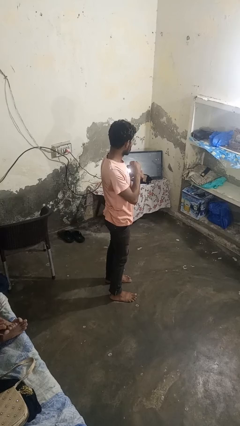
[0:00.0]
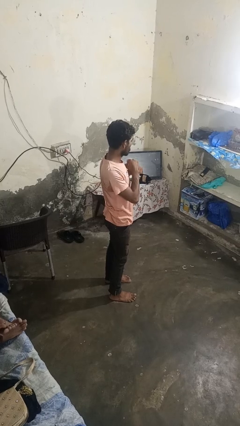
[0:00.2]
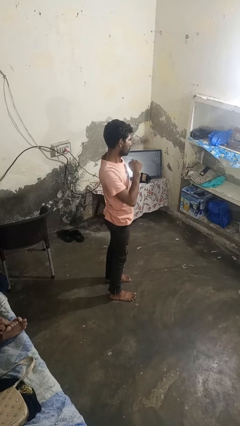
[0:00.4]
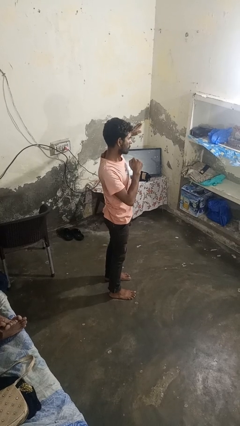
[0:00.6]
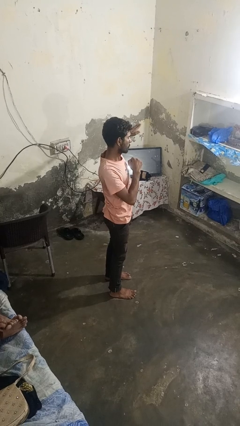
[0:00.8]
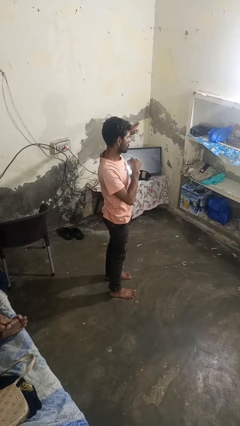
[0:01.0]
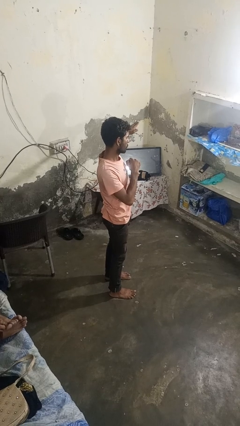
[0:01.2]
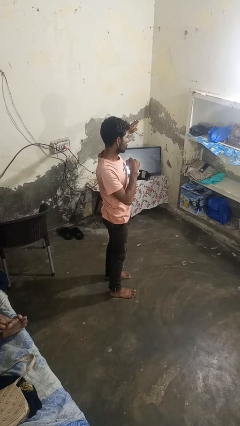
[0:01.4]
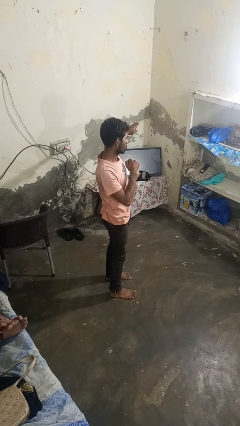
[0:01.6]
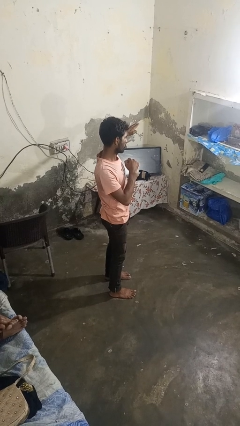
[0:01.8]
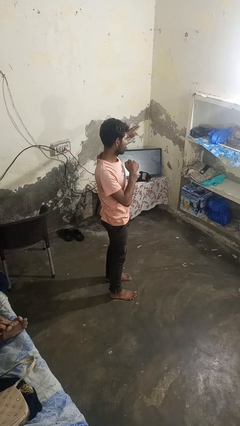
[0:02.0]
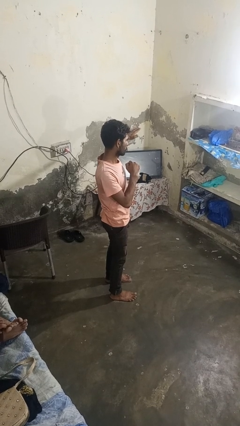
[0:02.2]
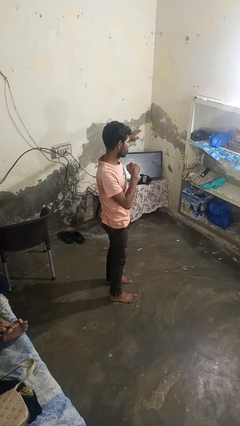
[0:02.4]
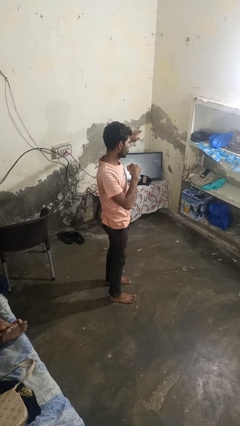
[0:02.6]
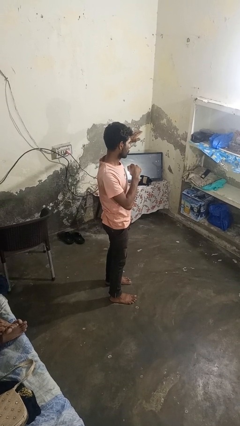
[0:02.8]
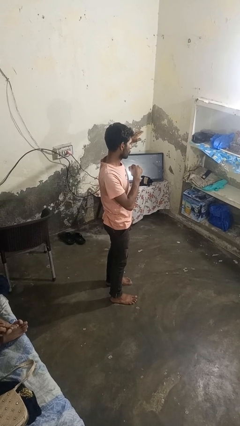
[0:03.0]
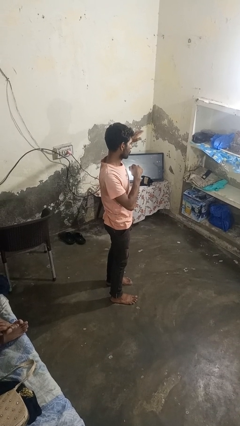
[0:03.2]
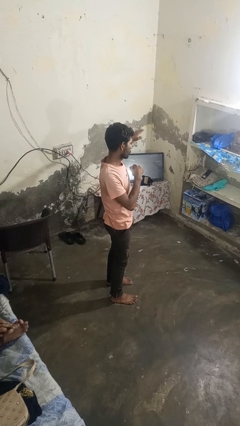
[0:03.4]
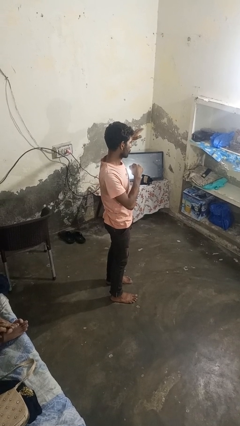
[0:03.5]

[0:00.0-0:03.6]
person karate chop

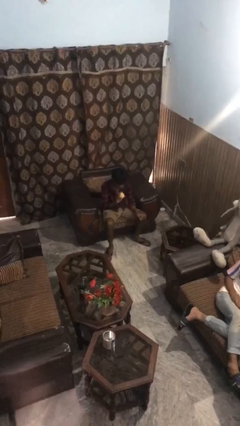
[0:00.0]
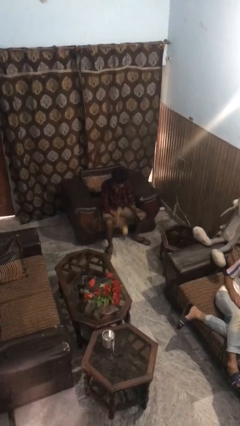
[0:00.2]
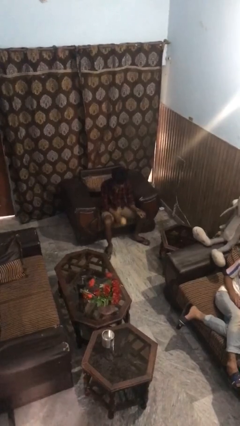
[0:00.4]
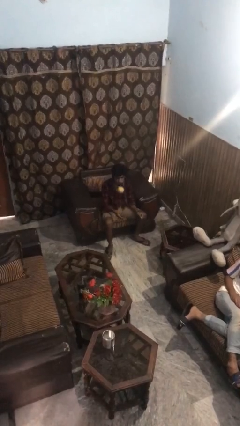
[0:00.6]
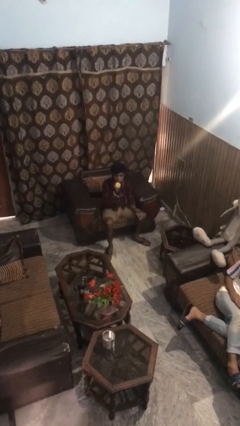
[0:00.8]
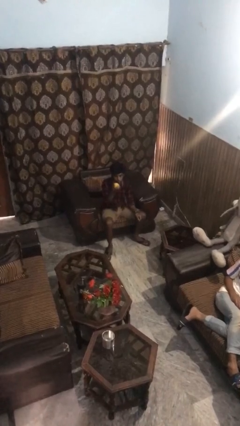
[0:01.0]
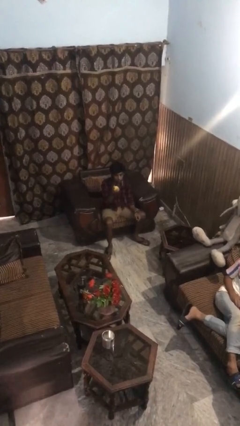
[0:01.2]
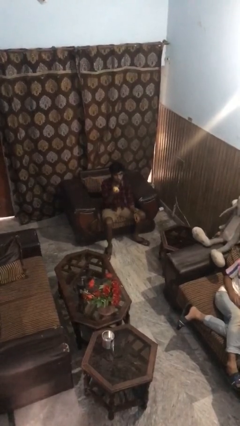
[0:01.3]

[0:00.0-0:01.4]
person bounces ball on floor

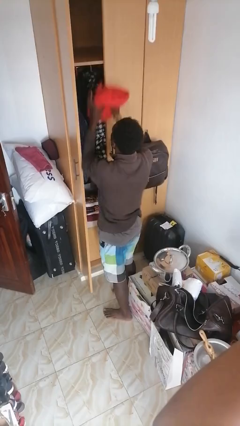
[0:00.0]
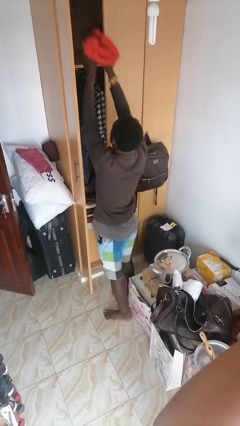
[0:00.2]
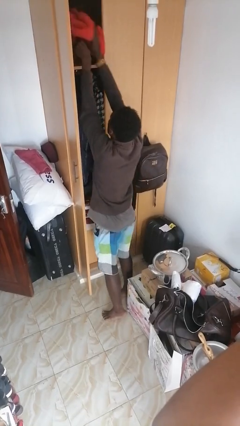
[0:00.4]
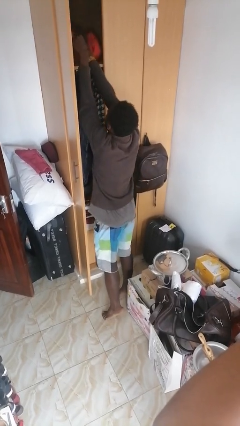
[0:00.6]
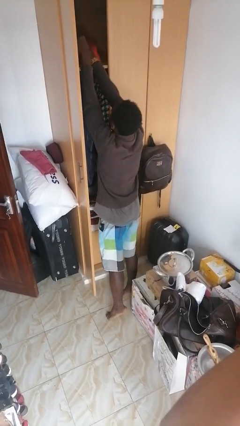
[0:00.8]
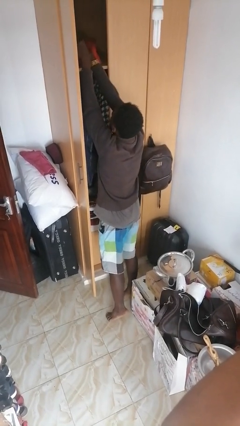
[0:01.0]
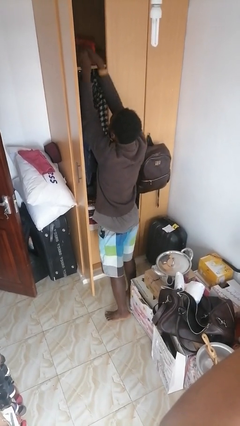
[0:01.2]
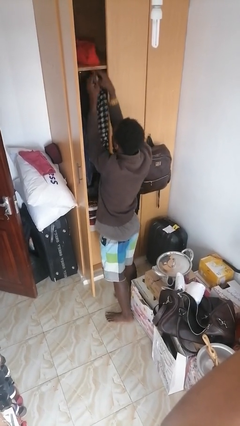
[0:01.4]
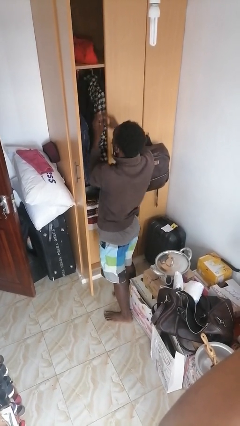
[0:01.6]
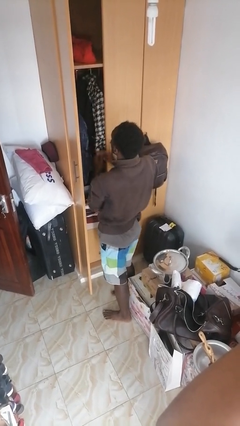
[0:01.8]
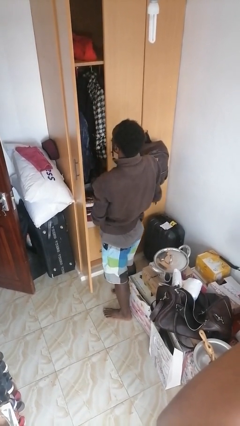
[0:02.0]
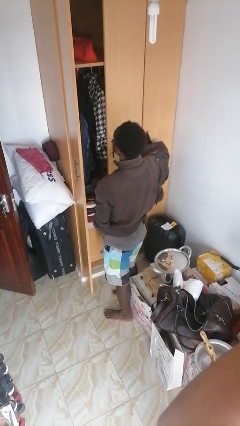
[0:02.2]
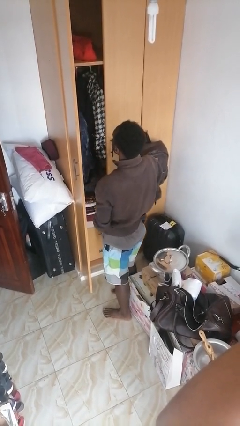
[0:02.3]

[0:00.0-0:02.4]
person puts down object on shelf

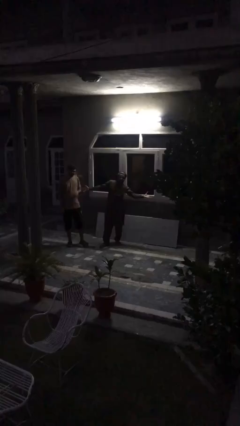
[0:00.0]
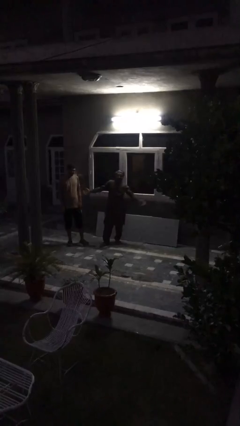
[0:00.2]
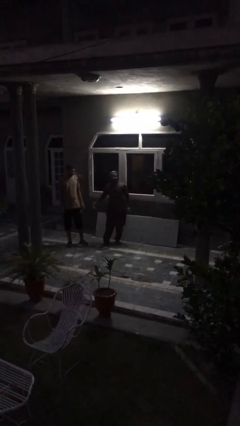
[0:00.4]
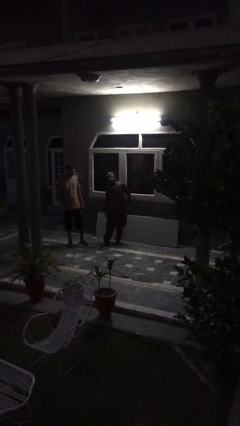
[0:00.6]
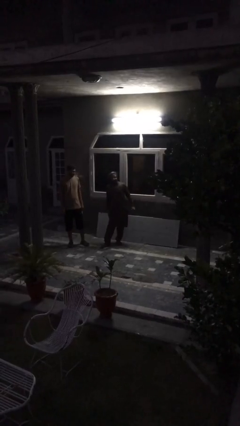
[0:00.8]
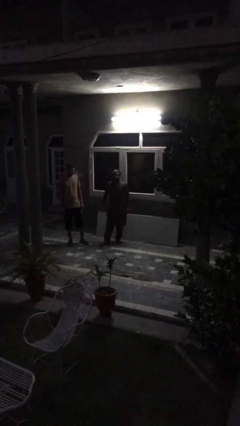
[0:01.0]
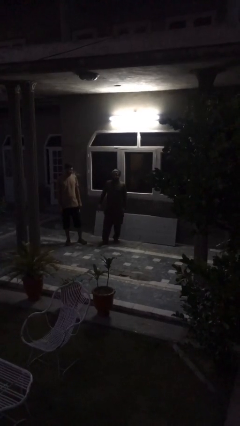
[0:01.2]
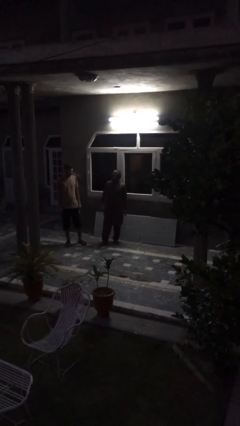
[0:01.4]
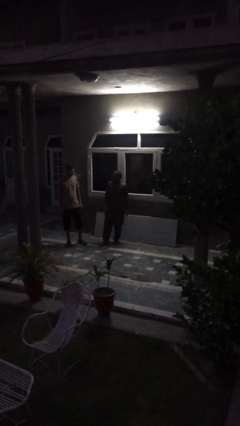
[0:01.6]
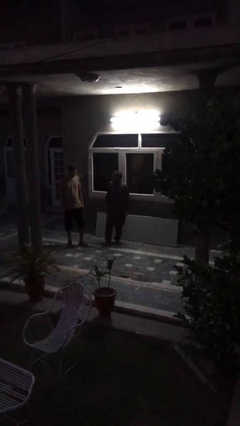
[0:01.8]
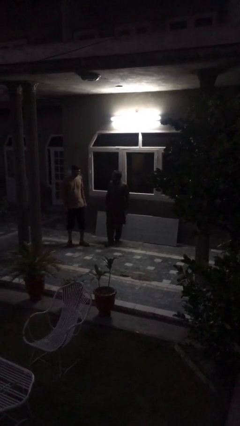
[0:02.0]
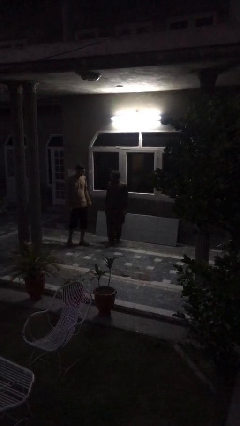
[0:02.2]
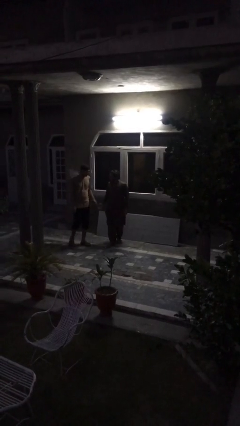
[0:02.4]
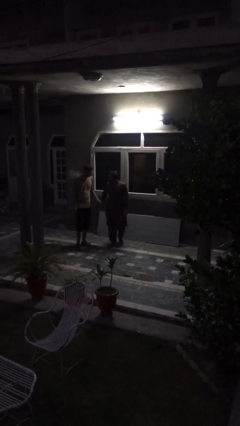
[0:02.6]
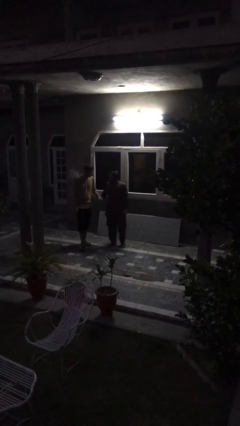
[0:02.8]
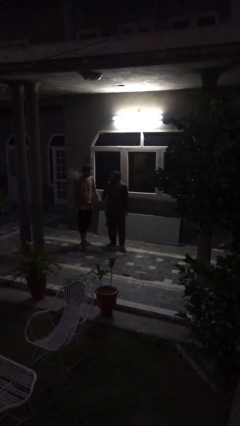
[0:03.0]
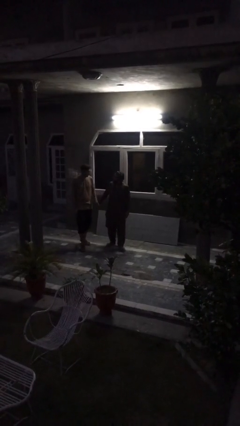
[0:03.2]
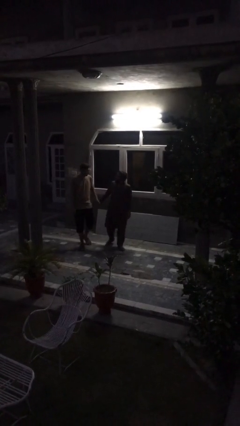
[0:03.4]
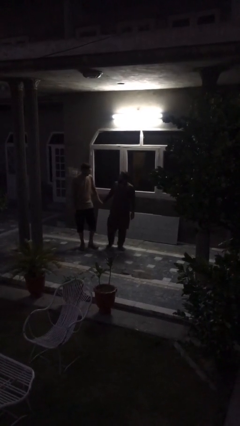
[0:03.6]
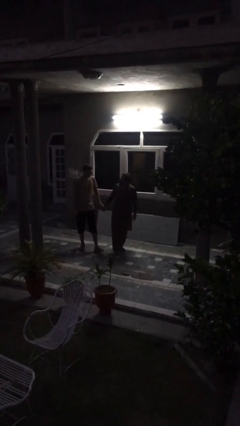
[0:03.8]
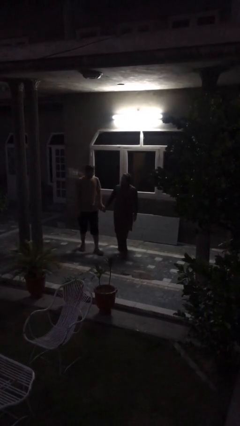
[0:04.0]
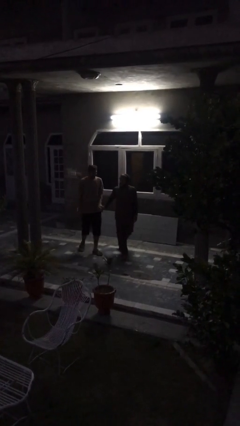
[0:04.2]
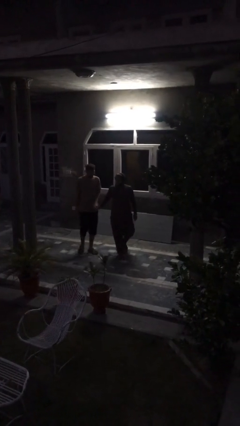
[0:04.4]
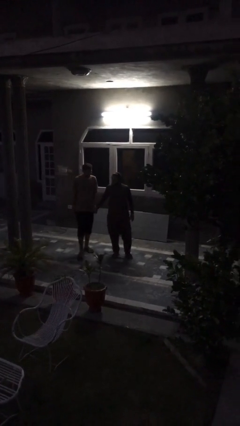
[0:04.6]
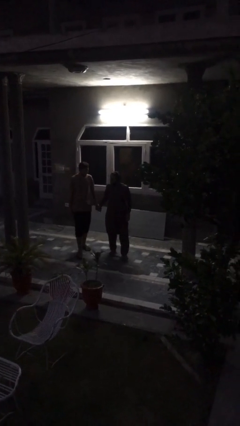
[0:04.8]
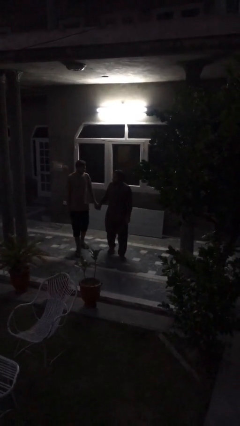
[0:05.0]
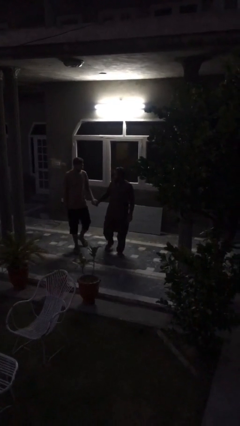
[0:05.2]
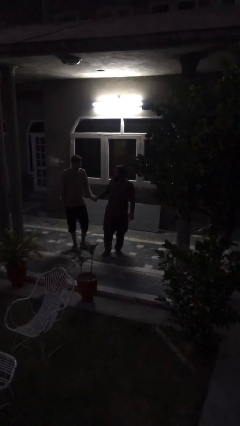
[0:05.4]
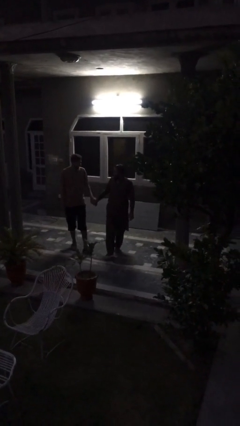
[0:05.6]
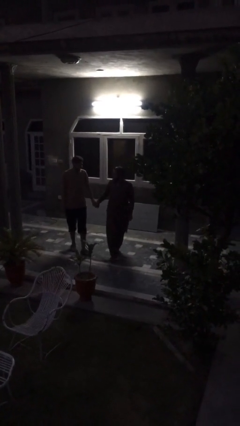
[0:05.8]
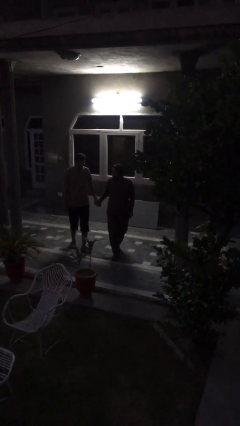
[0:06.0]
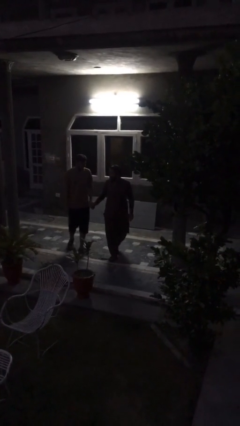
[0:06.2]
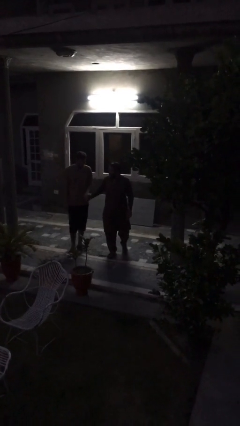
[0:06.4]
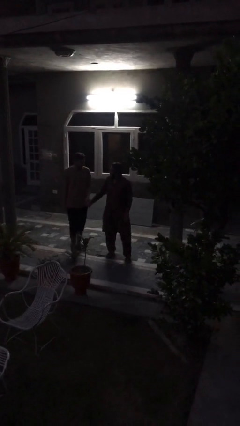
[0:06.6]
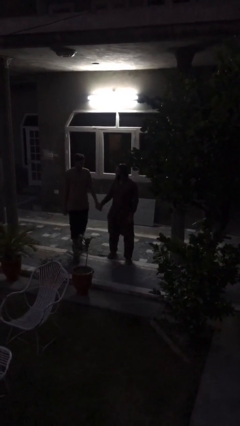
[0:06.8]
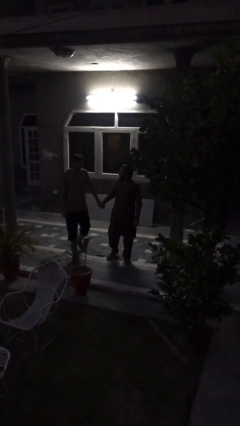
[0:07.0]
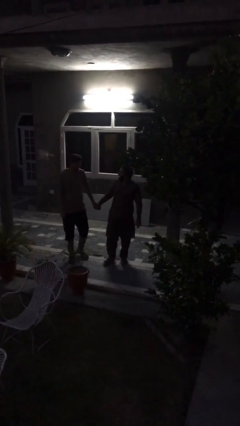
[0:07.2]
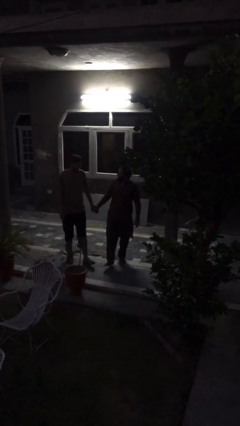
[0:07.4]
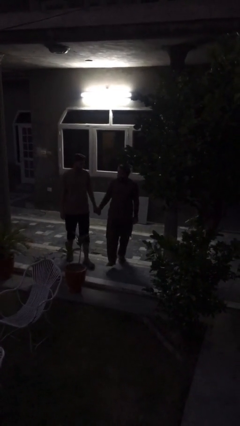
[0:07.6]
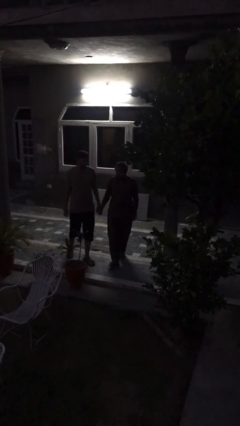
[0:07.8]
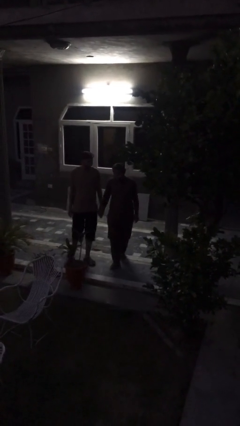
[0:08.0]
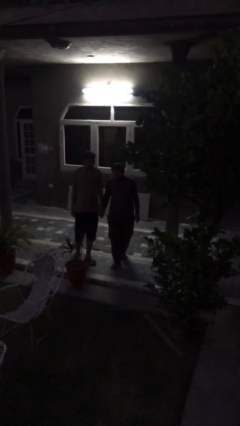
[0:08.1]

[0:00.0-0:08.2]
person holds hand

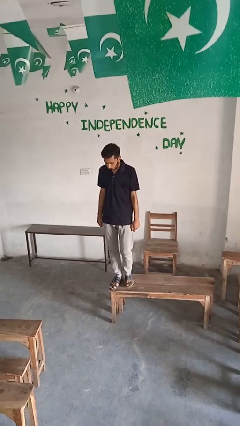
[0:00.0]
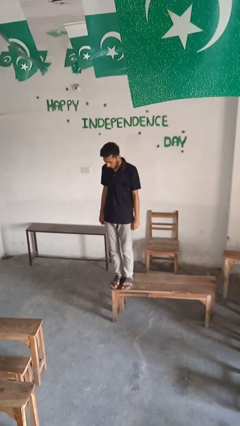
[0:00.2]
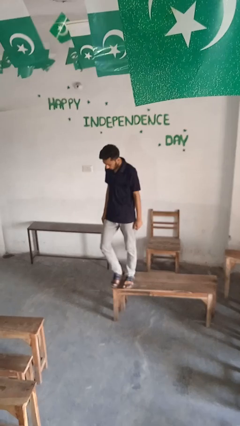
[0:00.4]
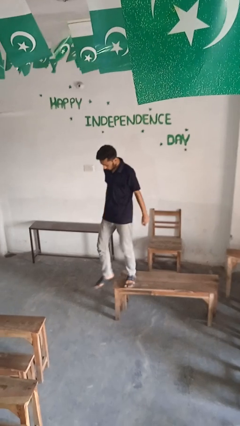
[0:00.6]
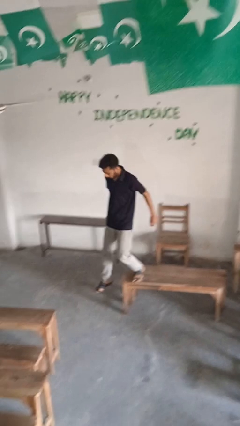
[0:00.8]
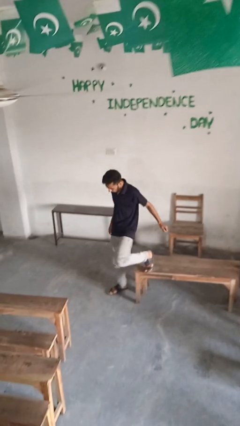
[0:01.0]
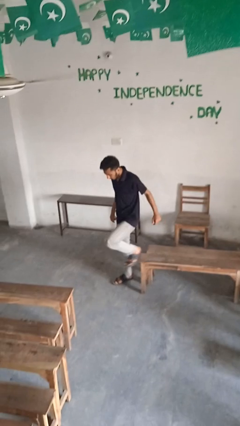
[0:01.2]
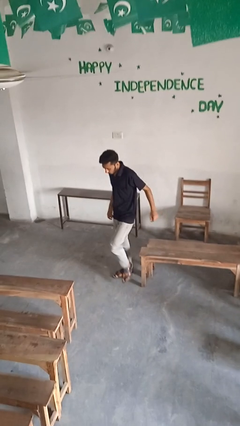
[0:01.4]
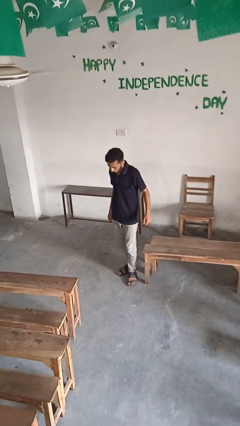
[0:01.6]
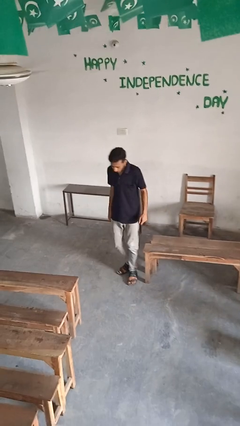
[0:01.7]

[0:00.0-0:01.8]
person climbs off table

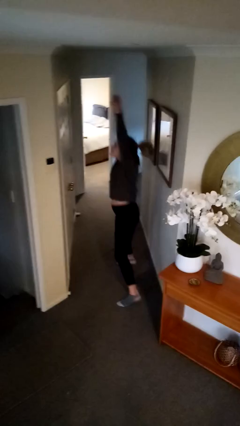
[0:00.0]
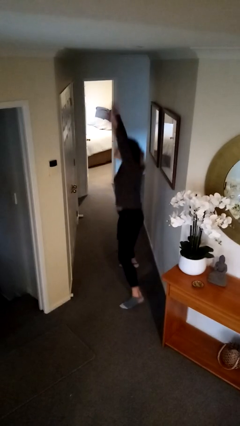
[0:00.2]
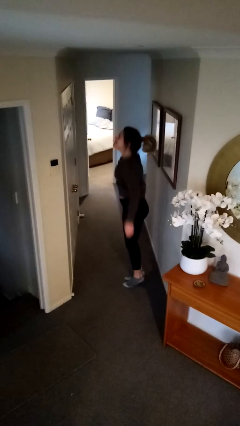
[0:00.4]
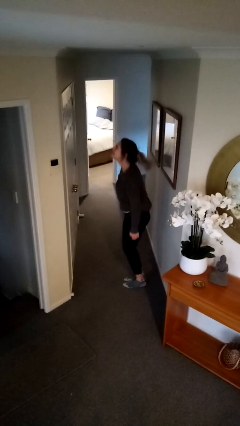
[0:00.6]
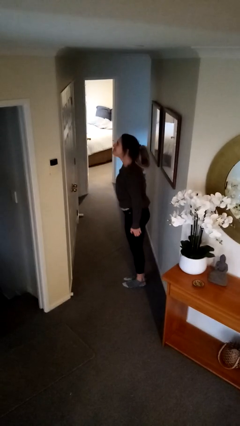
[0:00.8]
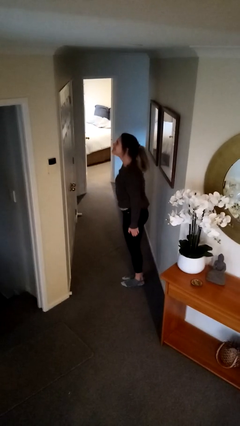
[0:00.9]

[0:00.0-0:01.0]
person exercises with jumping jacks
